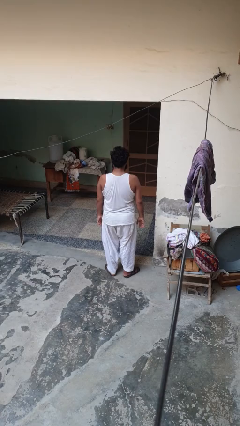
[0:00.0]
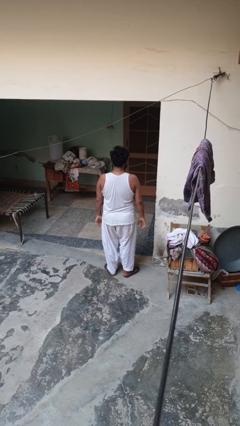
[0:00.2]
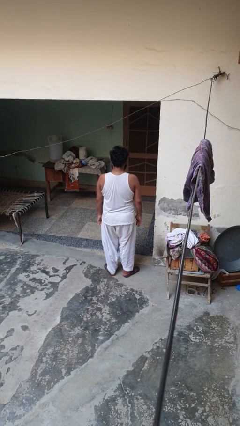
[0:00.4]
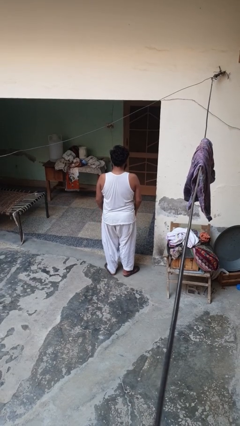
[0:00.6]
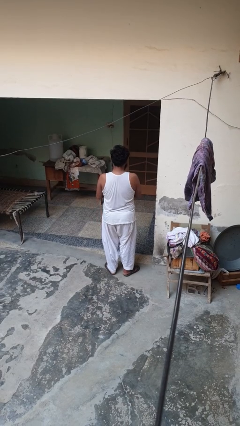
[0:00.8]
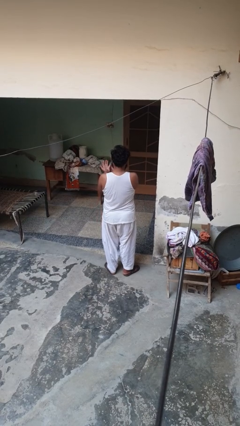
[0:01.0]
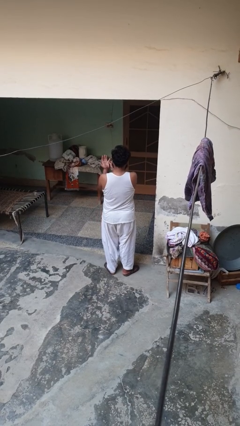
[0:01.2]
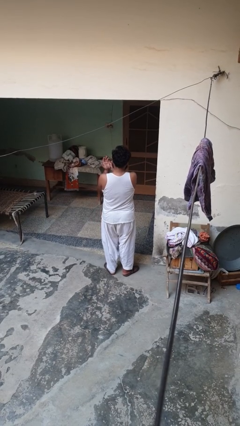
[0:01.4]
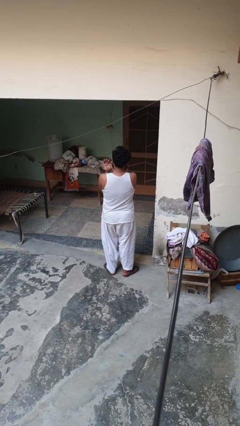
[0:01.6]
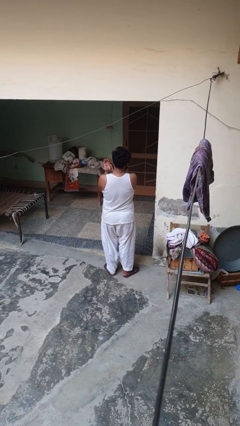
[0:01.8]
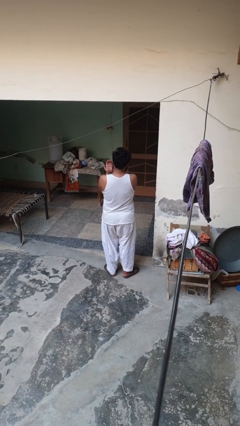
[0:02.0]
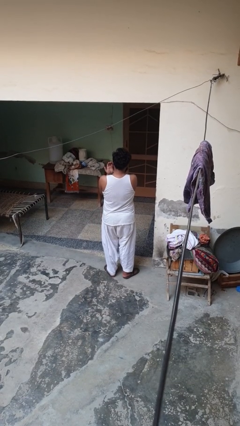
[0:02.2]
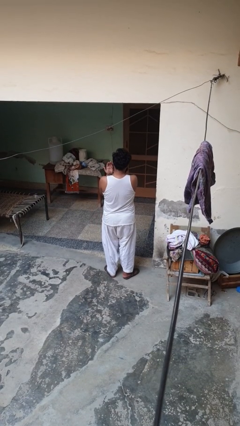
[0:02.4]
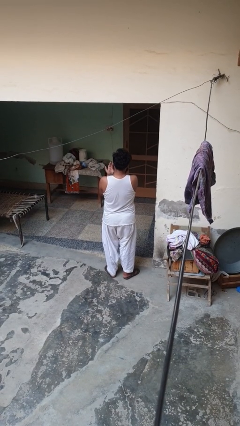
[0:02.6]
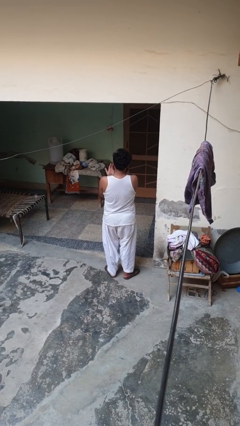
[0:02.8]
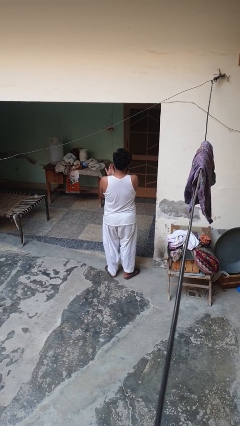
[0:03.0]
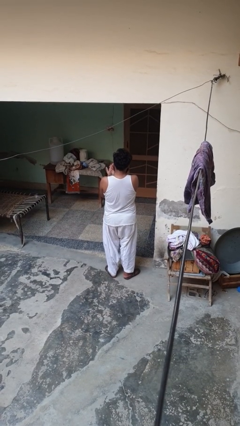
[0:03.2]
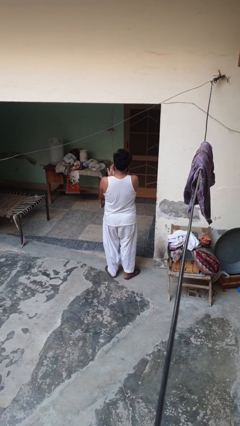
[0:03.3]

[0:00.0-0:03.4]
person snaps fingers

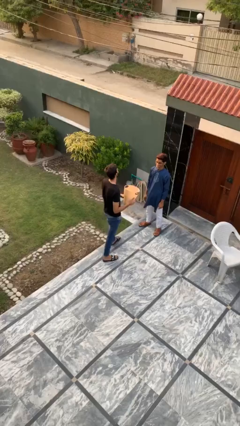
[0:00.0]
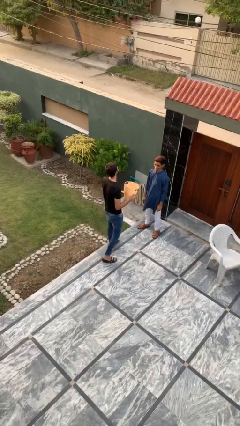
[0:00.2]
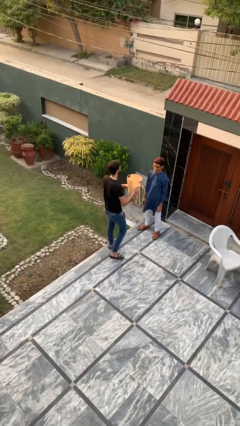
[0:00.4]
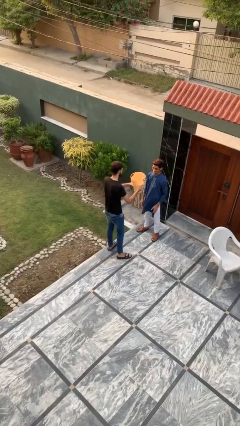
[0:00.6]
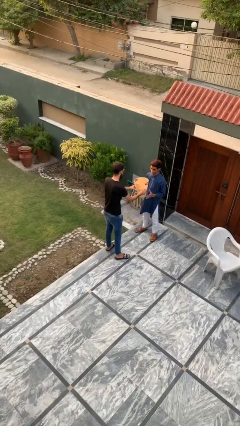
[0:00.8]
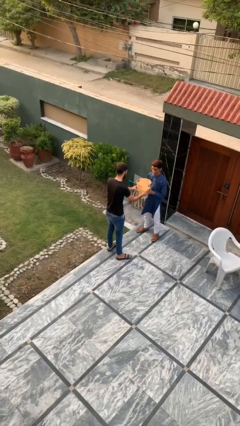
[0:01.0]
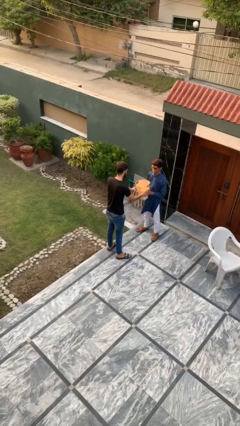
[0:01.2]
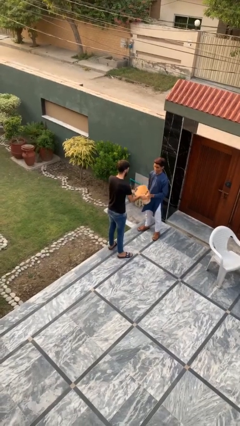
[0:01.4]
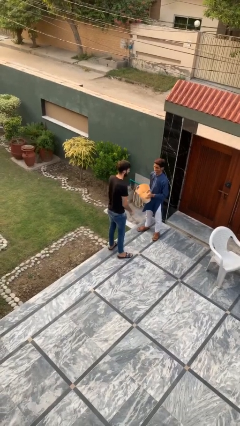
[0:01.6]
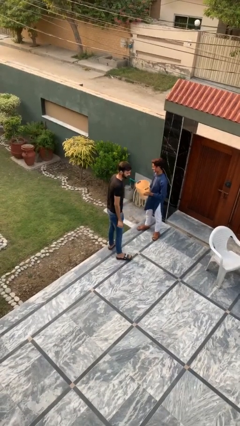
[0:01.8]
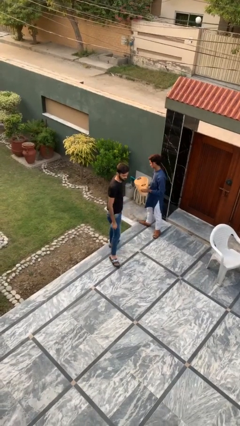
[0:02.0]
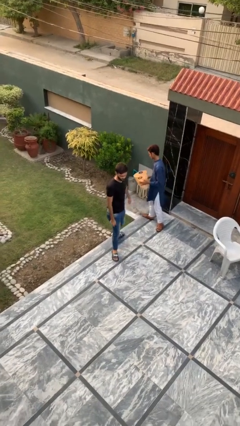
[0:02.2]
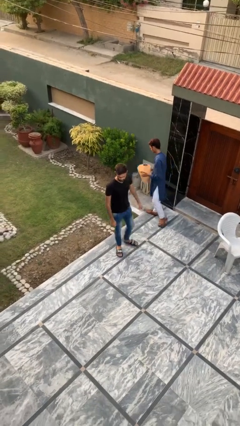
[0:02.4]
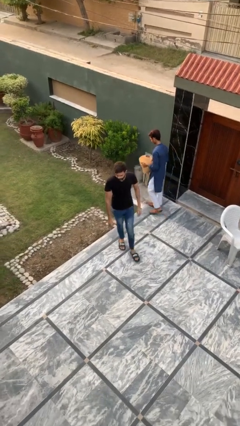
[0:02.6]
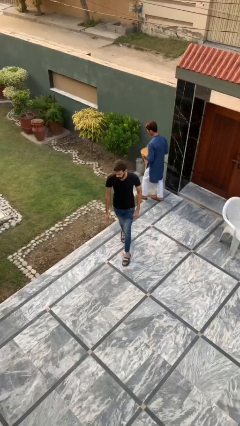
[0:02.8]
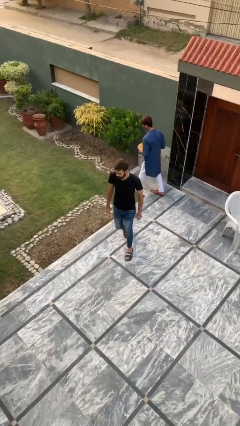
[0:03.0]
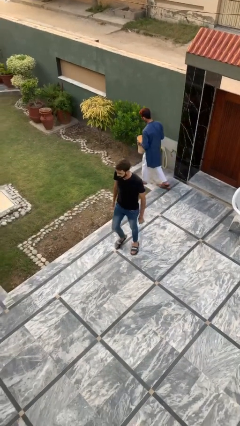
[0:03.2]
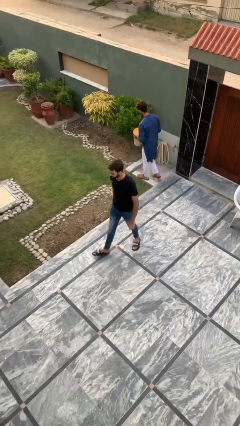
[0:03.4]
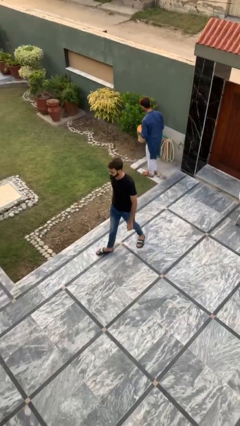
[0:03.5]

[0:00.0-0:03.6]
person transfers object to person

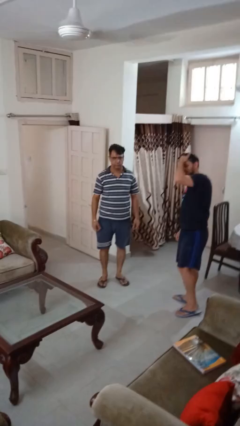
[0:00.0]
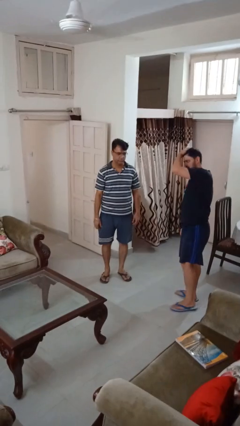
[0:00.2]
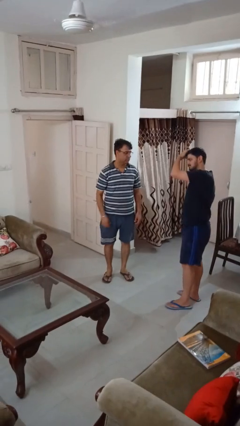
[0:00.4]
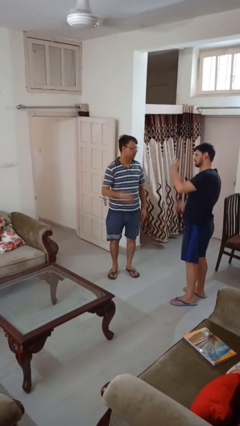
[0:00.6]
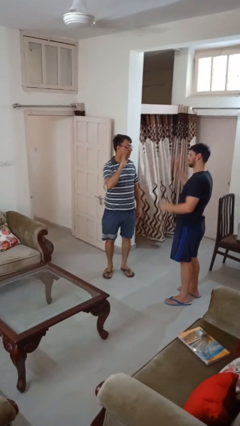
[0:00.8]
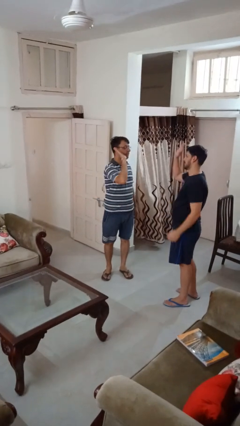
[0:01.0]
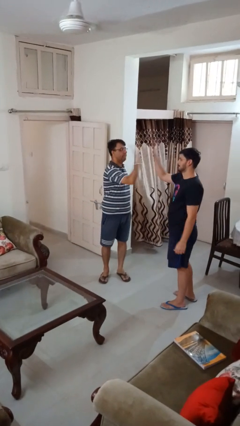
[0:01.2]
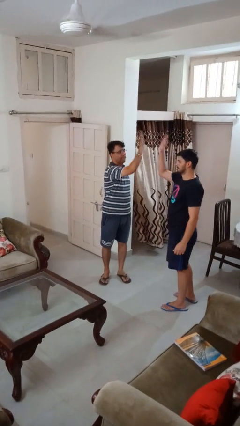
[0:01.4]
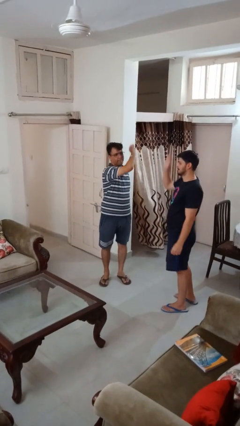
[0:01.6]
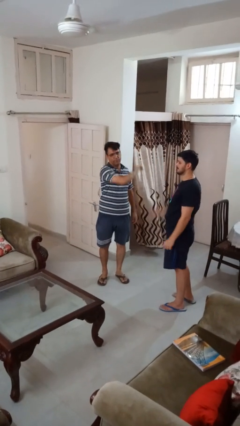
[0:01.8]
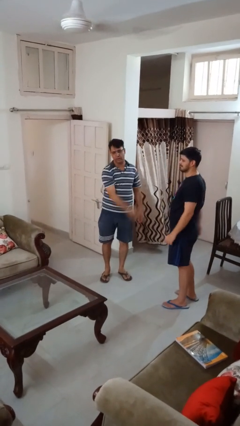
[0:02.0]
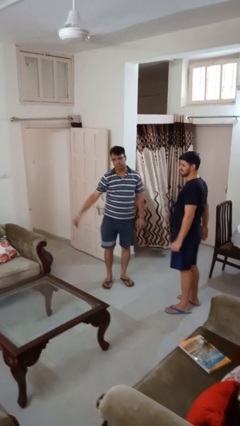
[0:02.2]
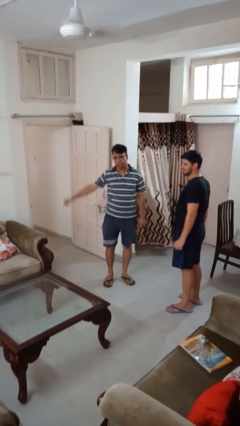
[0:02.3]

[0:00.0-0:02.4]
person highfives hand

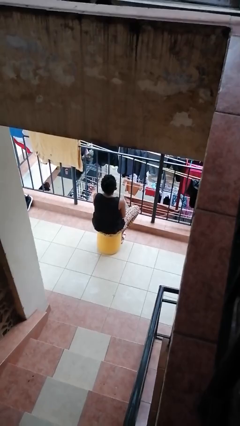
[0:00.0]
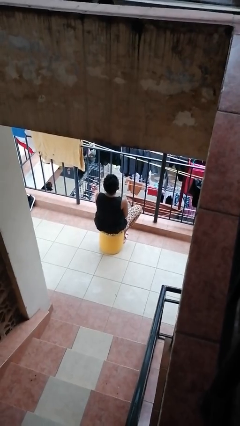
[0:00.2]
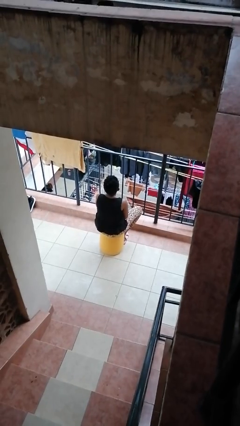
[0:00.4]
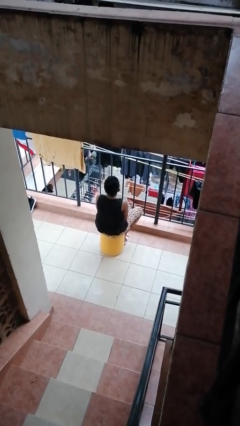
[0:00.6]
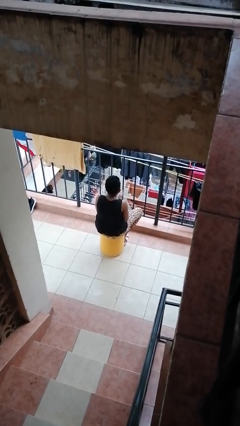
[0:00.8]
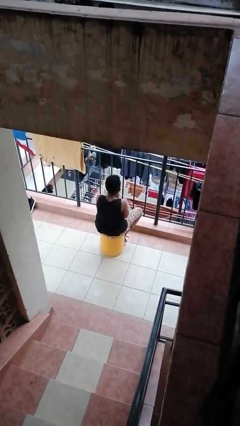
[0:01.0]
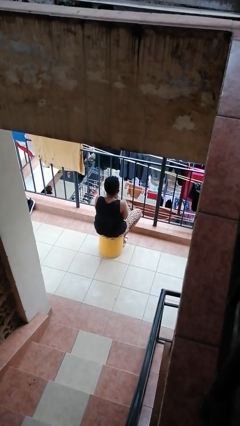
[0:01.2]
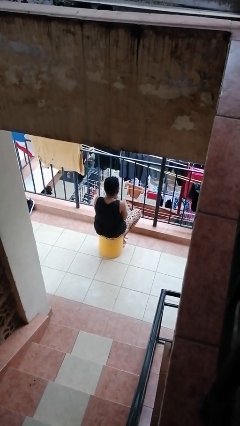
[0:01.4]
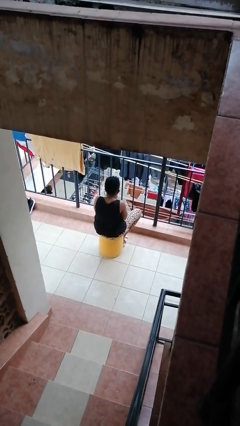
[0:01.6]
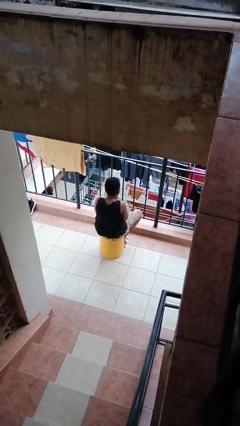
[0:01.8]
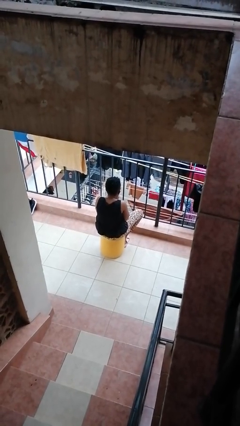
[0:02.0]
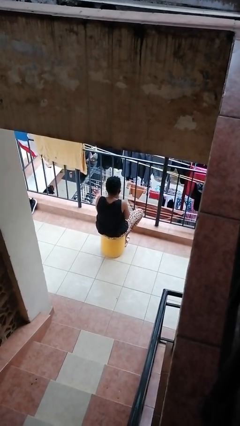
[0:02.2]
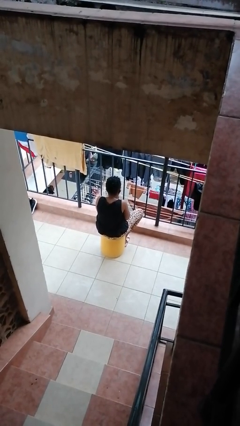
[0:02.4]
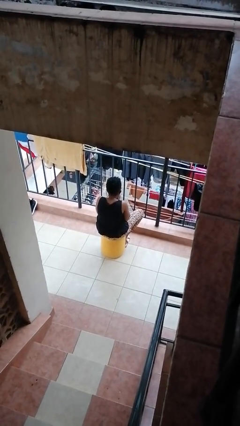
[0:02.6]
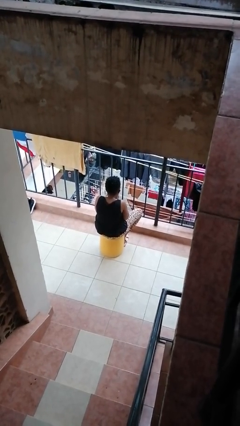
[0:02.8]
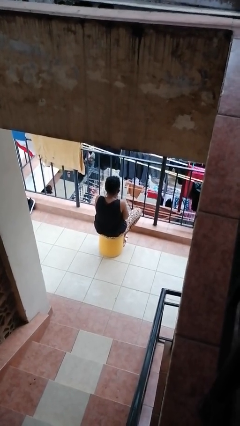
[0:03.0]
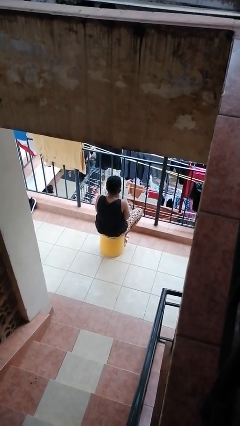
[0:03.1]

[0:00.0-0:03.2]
person blows into hands

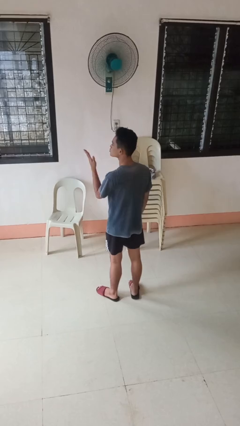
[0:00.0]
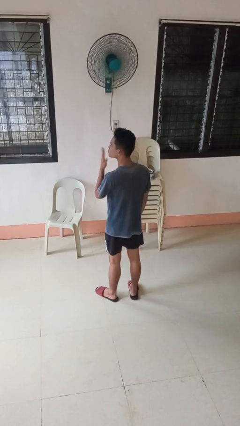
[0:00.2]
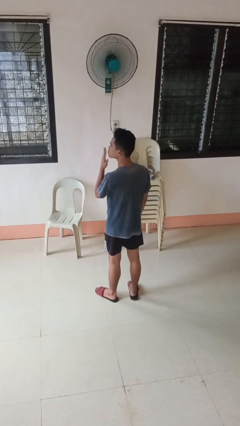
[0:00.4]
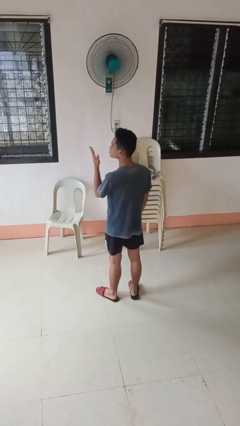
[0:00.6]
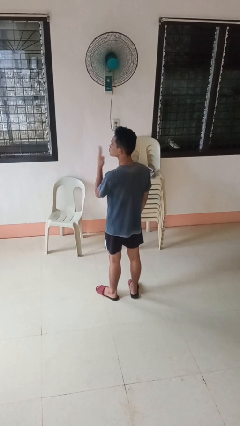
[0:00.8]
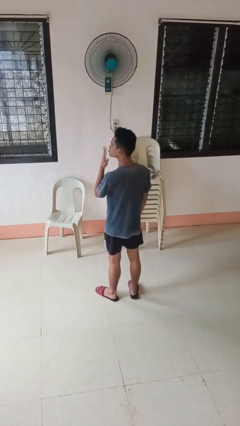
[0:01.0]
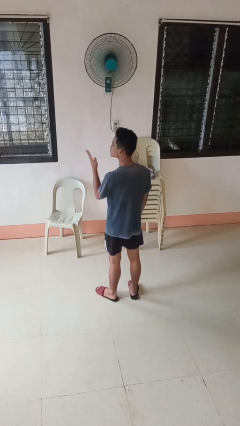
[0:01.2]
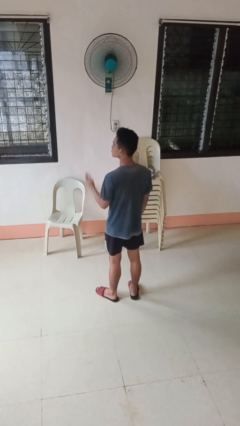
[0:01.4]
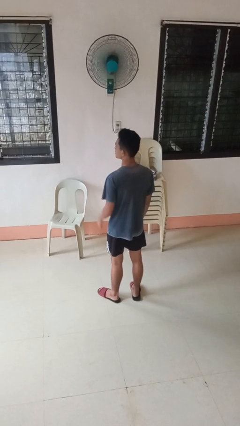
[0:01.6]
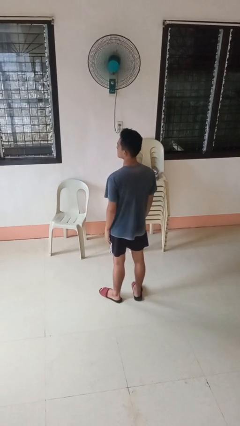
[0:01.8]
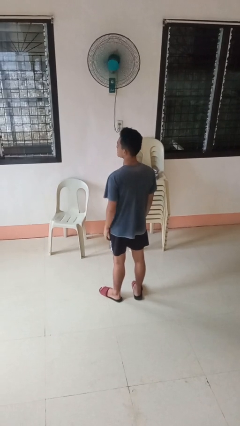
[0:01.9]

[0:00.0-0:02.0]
person gestures blow kiss

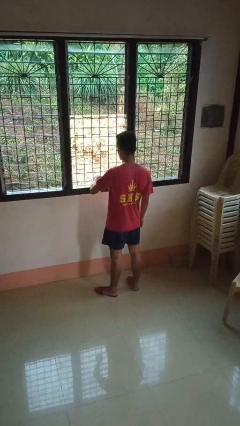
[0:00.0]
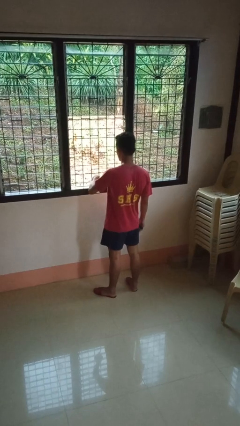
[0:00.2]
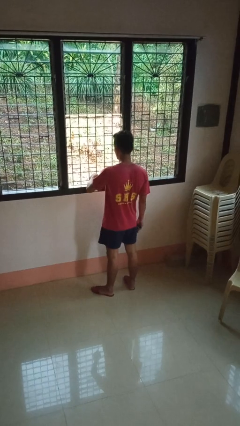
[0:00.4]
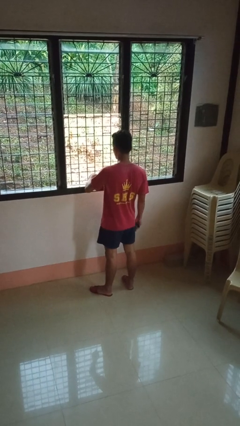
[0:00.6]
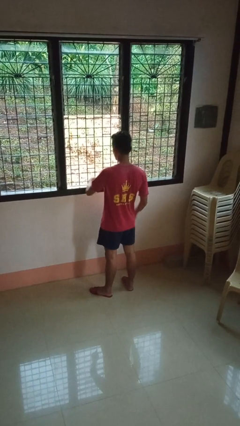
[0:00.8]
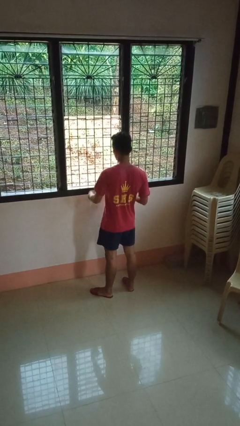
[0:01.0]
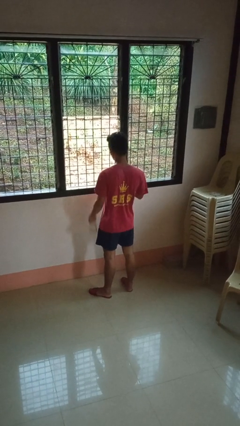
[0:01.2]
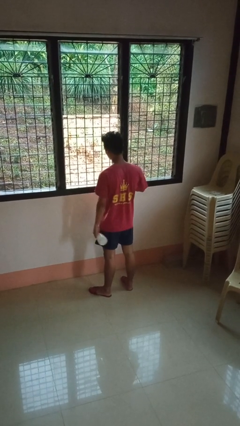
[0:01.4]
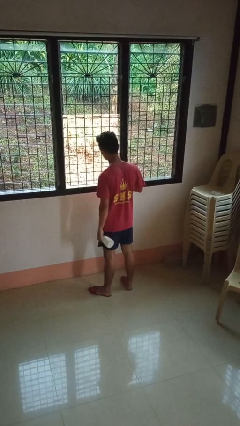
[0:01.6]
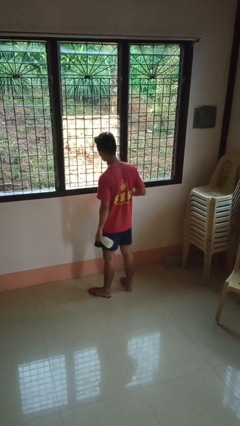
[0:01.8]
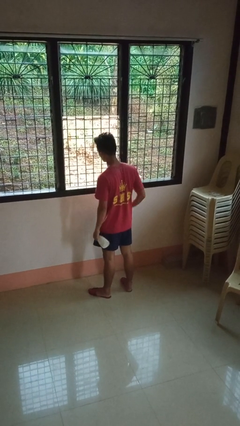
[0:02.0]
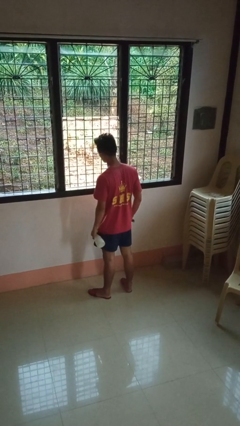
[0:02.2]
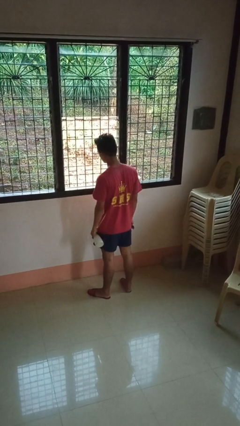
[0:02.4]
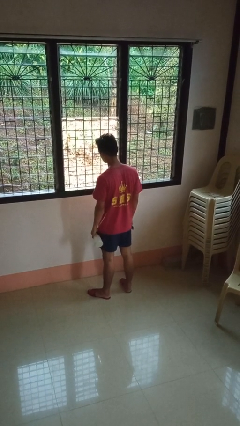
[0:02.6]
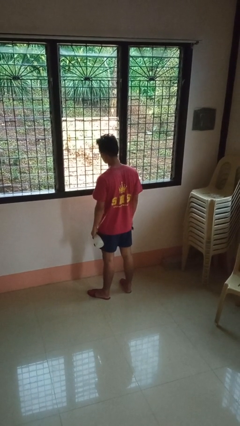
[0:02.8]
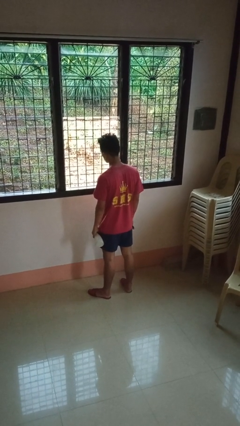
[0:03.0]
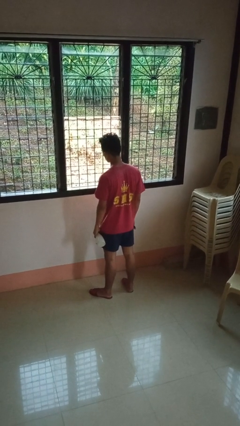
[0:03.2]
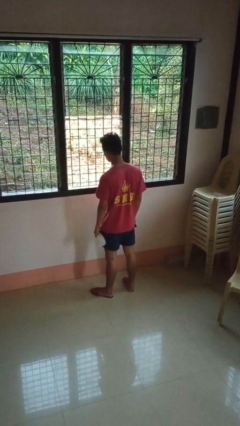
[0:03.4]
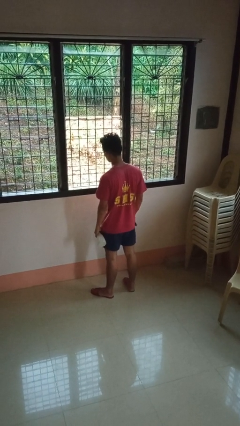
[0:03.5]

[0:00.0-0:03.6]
person sprays from bottle
